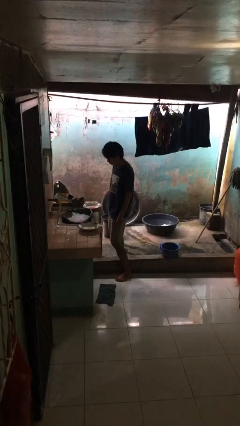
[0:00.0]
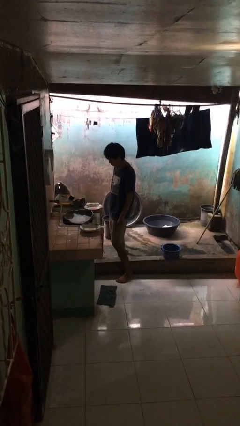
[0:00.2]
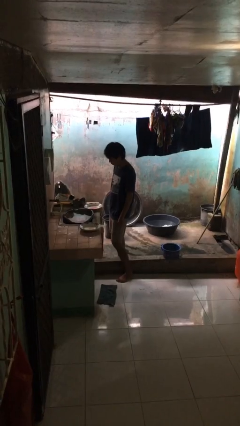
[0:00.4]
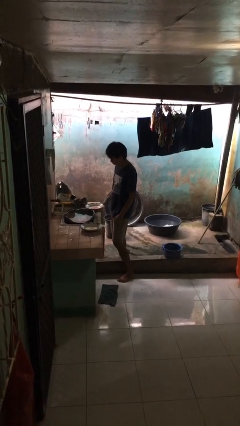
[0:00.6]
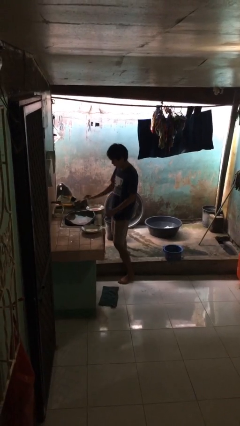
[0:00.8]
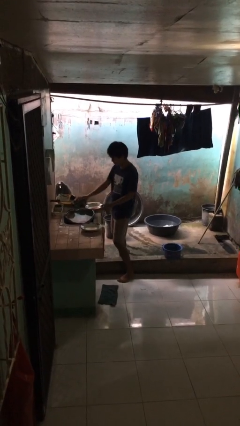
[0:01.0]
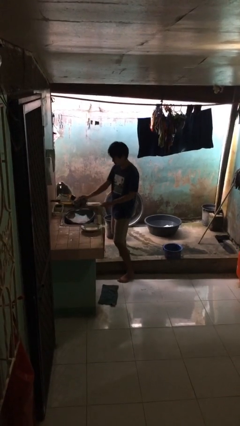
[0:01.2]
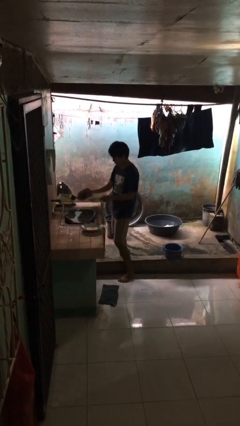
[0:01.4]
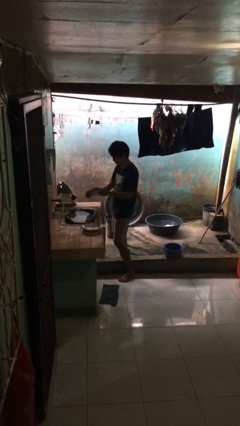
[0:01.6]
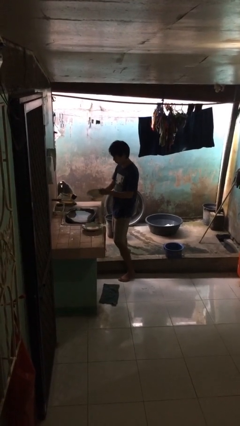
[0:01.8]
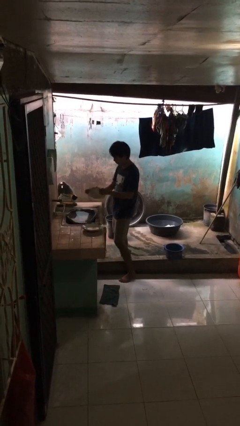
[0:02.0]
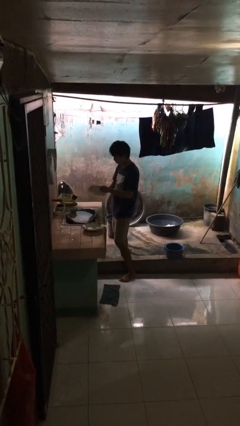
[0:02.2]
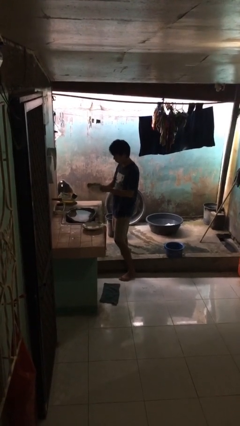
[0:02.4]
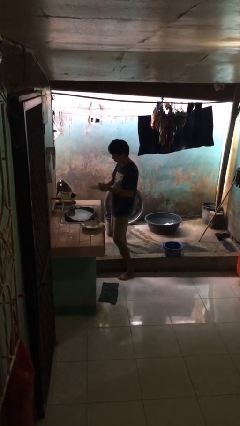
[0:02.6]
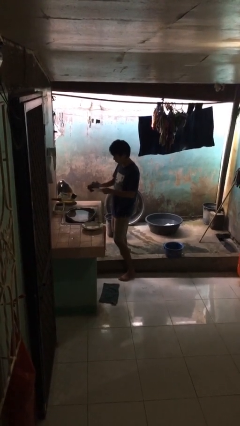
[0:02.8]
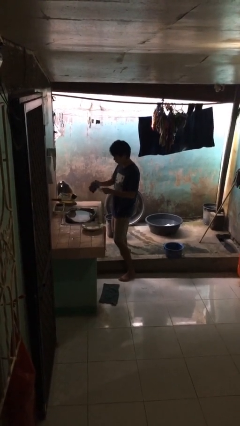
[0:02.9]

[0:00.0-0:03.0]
person dries dish

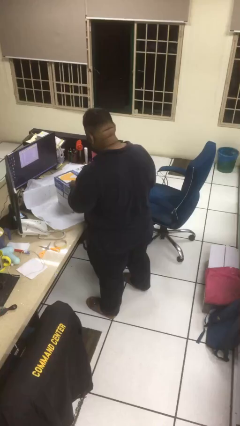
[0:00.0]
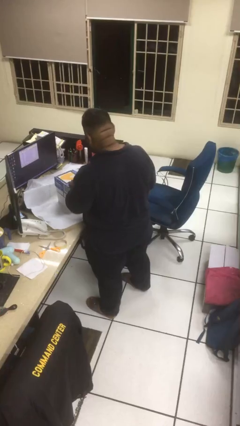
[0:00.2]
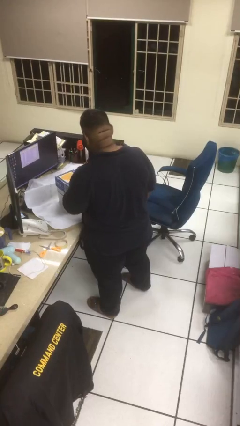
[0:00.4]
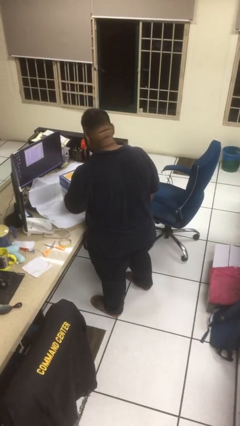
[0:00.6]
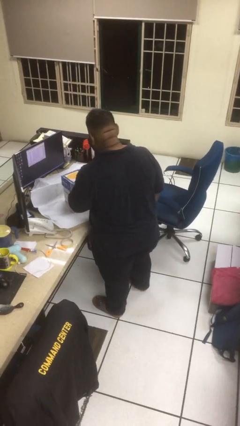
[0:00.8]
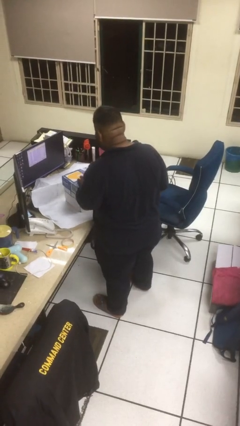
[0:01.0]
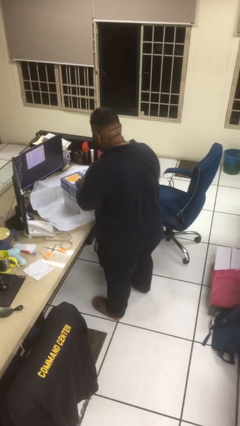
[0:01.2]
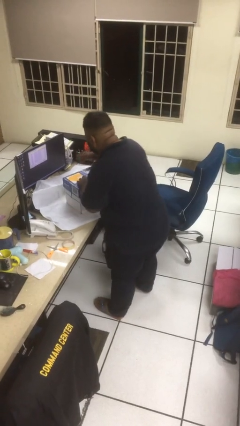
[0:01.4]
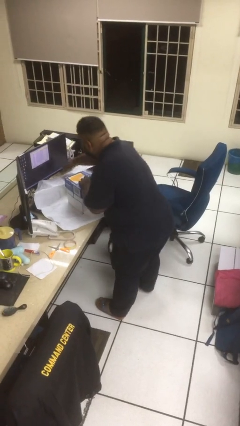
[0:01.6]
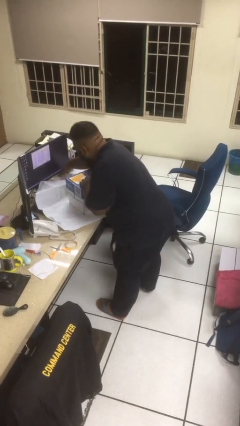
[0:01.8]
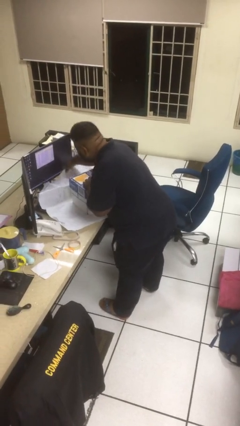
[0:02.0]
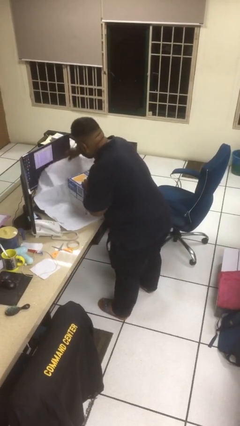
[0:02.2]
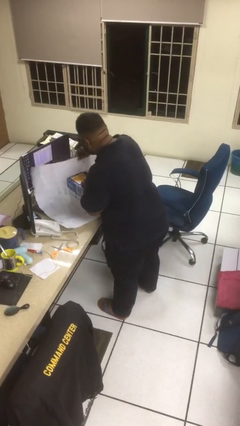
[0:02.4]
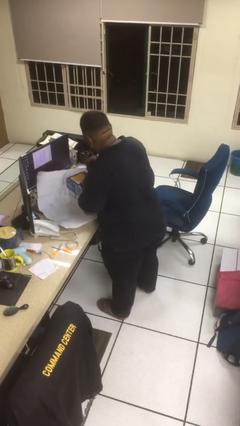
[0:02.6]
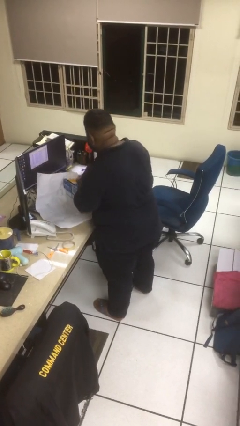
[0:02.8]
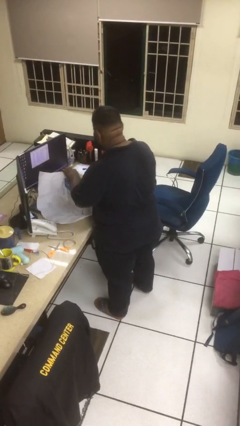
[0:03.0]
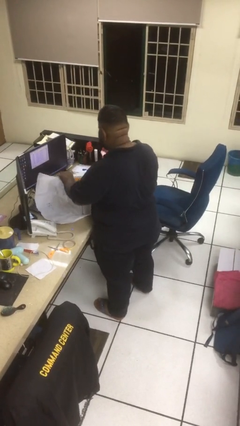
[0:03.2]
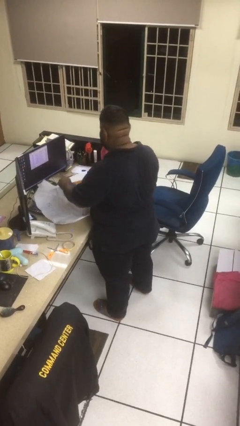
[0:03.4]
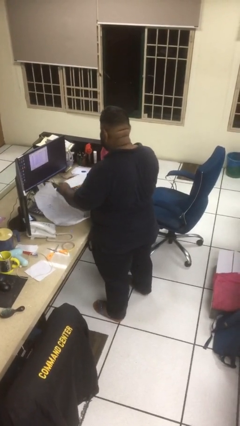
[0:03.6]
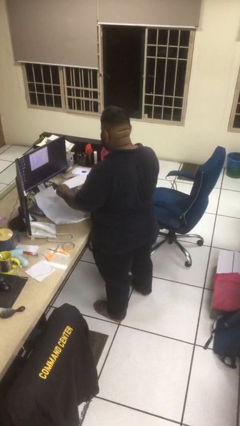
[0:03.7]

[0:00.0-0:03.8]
person wraps box

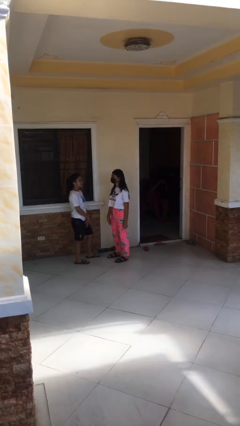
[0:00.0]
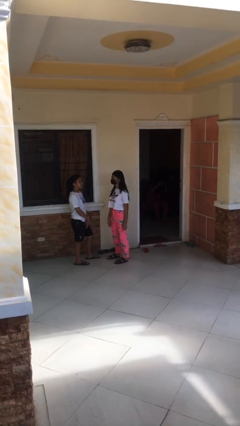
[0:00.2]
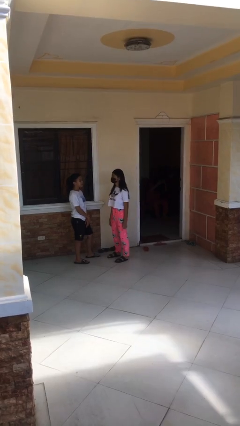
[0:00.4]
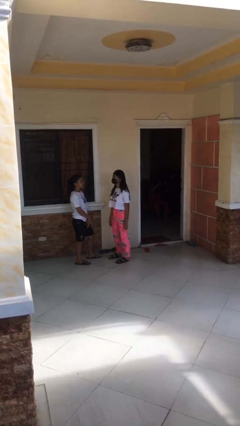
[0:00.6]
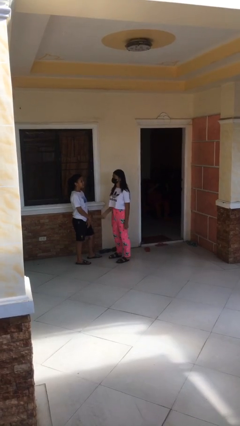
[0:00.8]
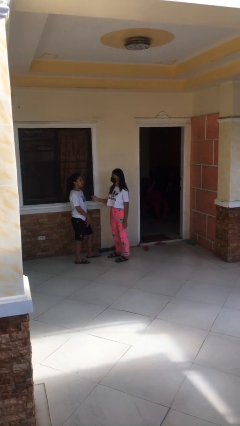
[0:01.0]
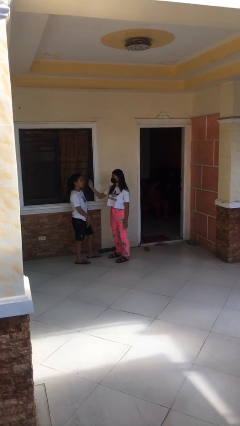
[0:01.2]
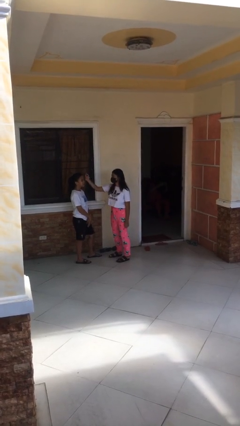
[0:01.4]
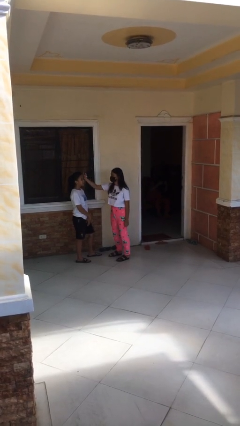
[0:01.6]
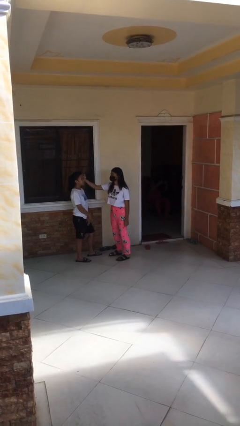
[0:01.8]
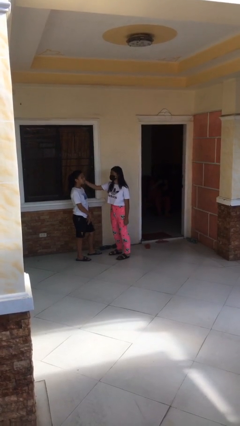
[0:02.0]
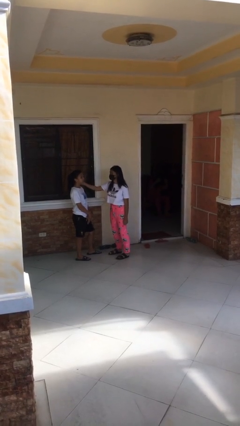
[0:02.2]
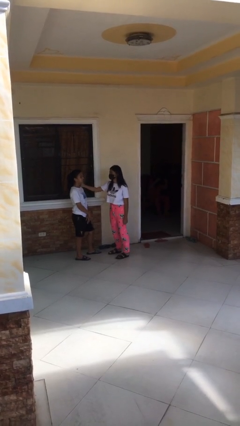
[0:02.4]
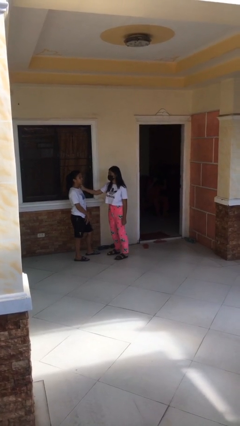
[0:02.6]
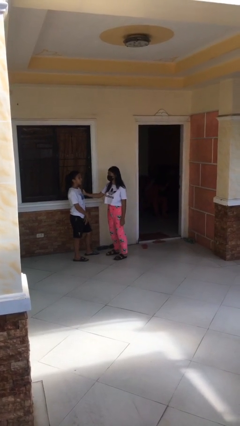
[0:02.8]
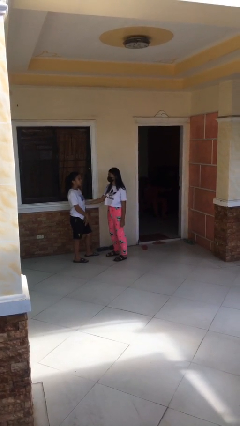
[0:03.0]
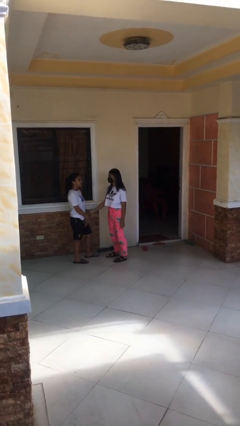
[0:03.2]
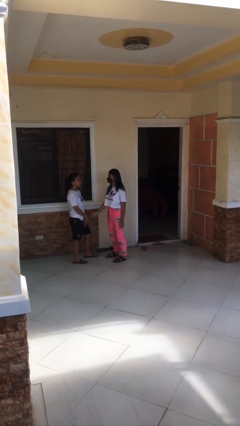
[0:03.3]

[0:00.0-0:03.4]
person touches face of person

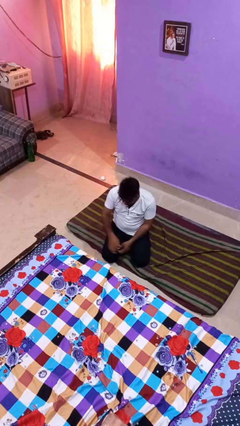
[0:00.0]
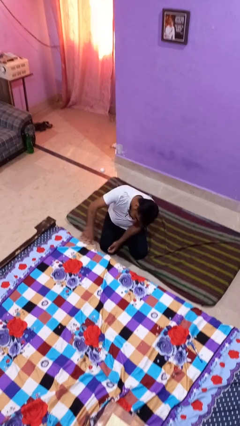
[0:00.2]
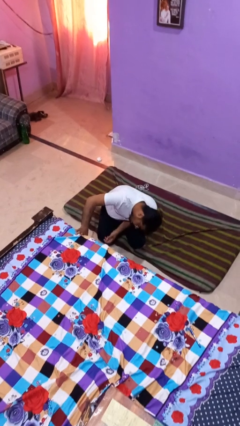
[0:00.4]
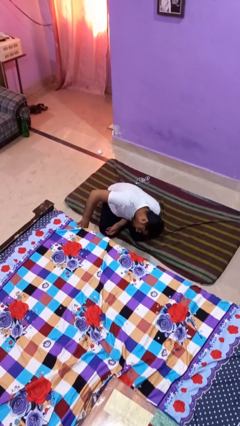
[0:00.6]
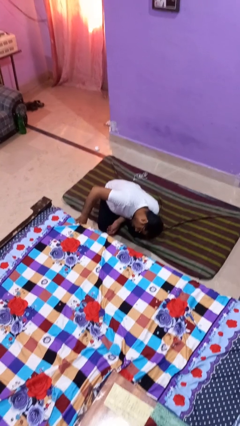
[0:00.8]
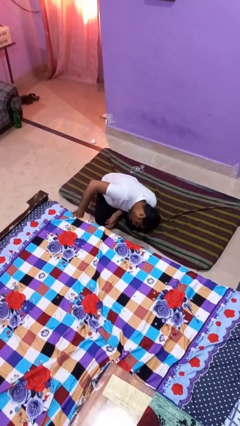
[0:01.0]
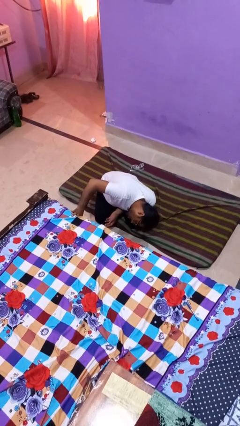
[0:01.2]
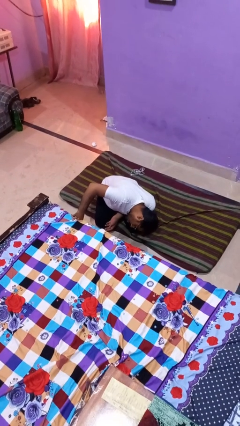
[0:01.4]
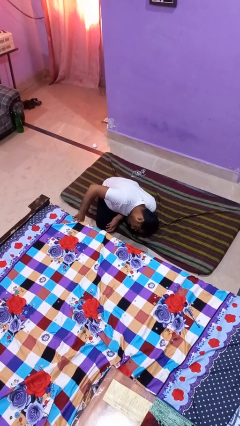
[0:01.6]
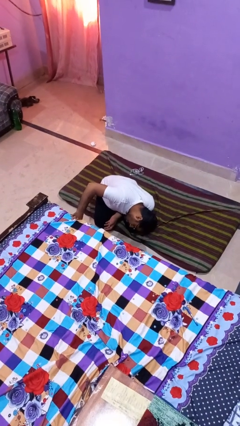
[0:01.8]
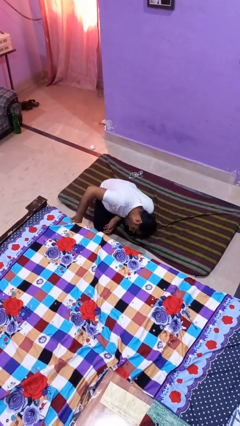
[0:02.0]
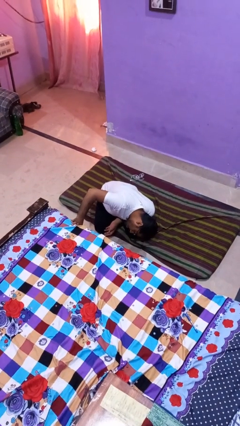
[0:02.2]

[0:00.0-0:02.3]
person searches under bed

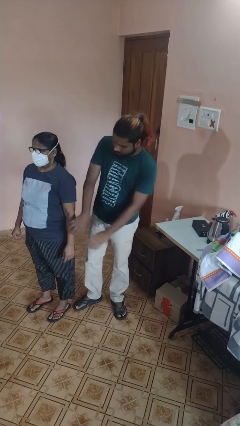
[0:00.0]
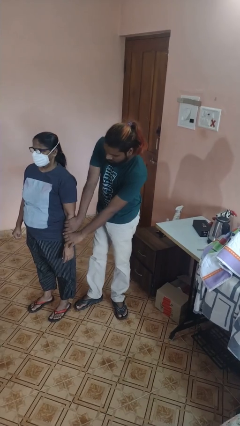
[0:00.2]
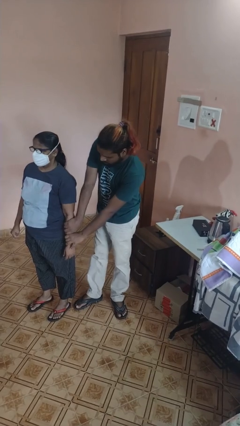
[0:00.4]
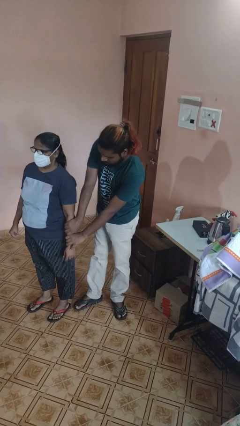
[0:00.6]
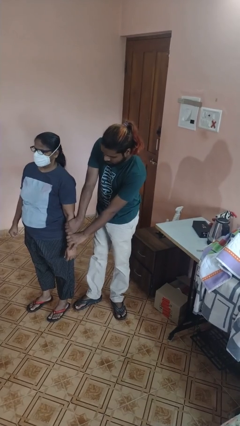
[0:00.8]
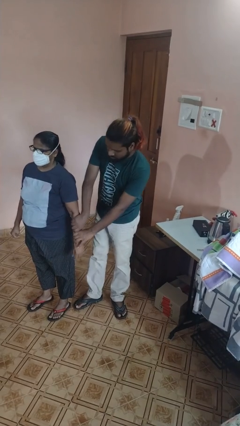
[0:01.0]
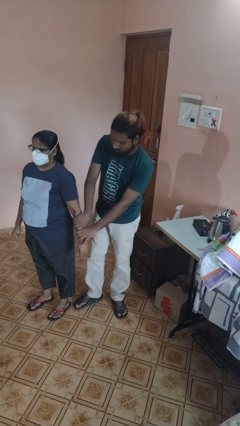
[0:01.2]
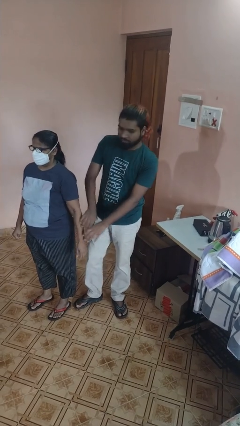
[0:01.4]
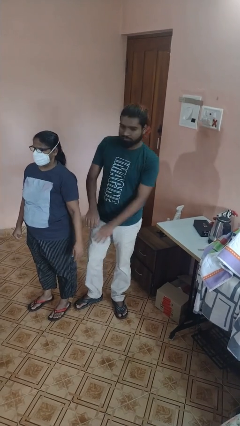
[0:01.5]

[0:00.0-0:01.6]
person grabs person by forearm

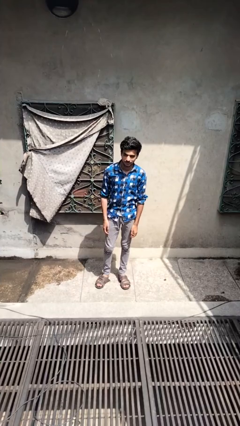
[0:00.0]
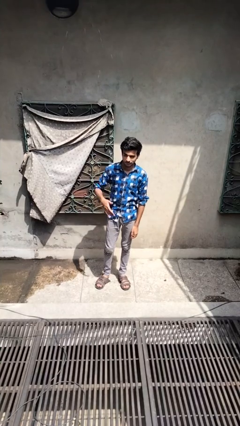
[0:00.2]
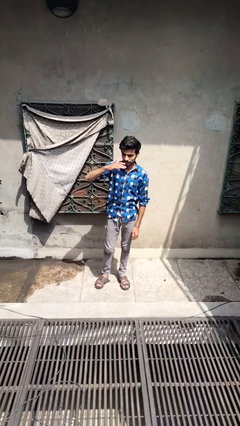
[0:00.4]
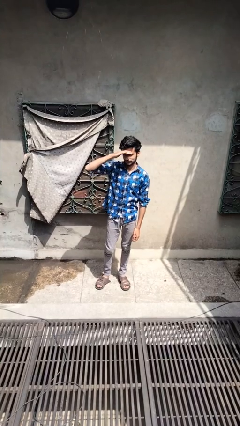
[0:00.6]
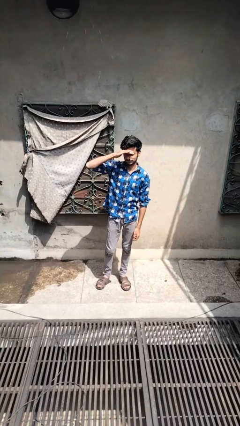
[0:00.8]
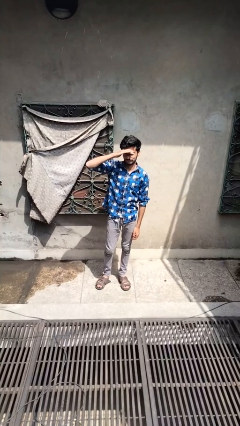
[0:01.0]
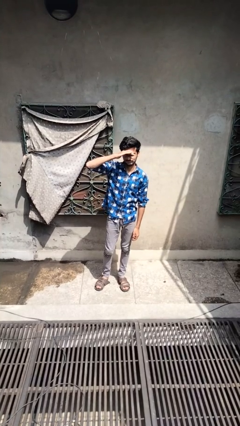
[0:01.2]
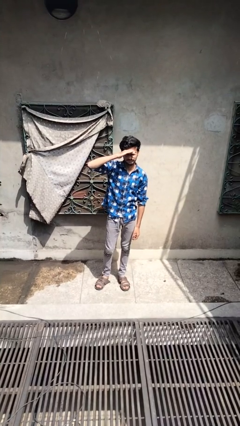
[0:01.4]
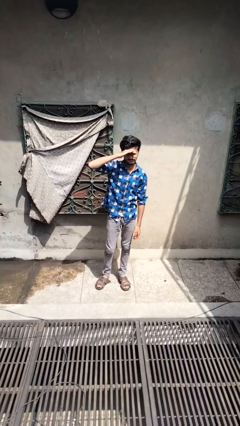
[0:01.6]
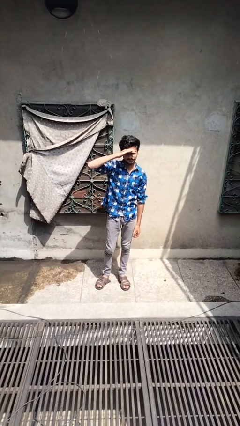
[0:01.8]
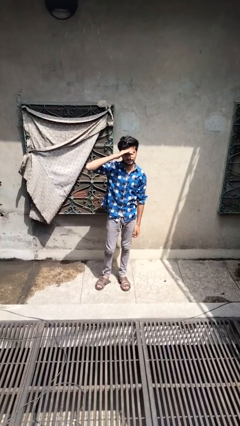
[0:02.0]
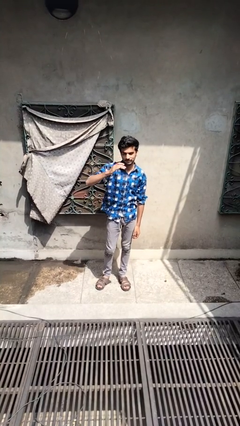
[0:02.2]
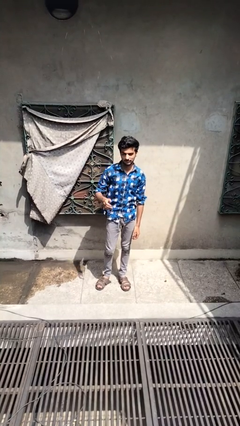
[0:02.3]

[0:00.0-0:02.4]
person shades eyes

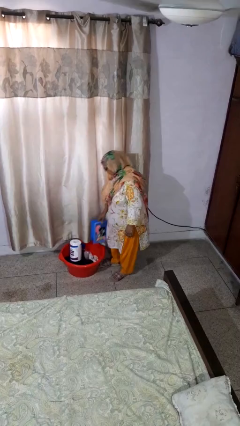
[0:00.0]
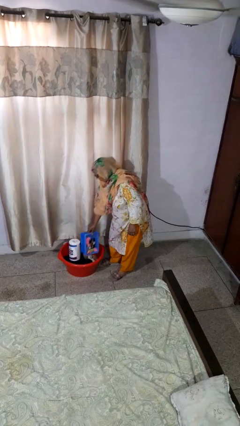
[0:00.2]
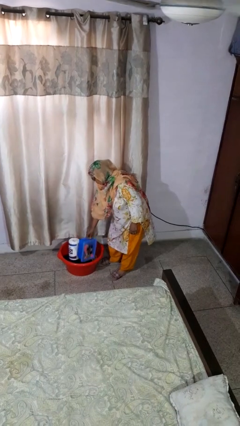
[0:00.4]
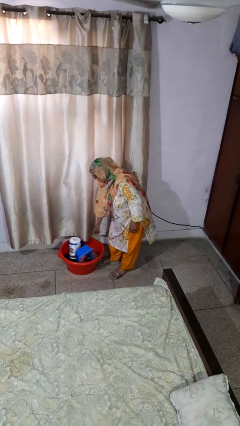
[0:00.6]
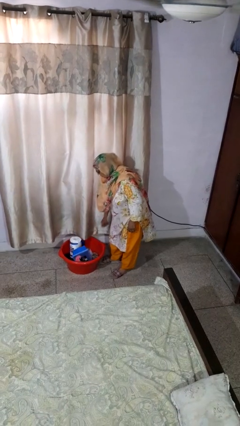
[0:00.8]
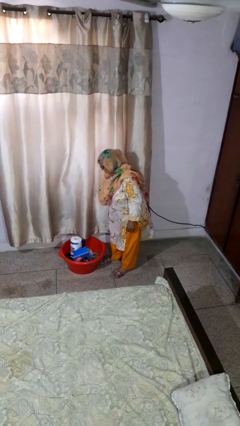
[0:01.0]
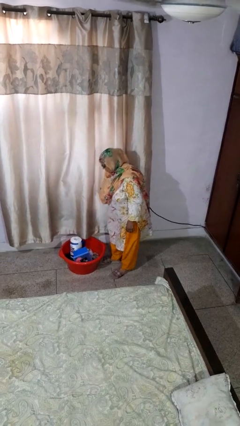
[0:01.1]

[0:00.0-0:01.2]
person puts object into basket
